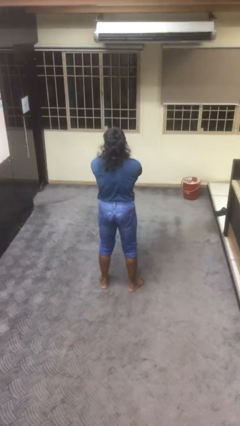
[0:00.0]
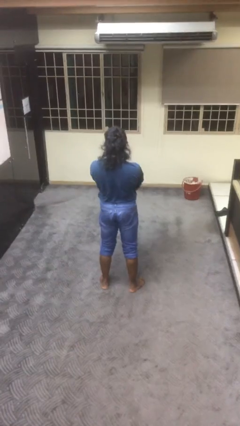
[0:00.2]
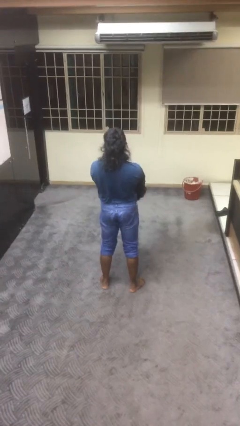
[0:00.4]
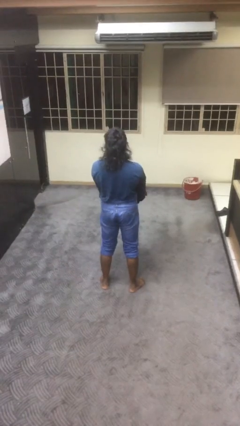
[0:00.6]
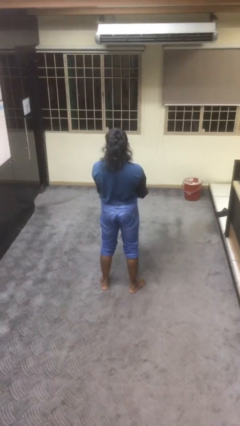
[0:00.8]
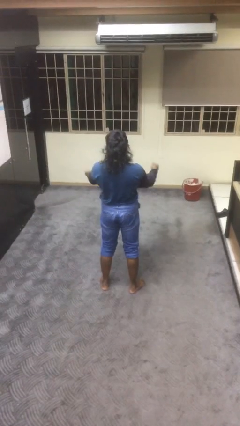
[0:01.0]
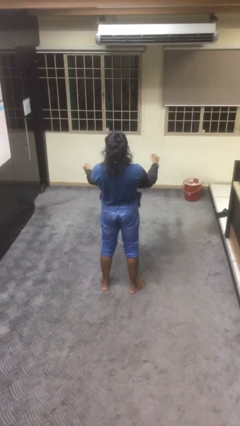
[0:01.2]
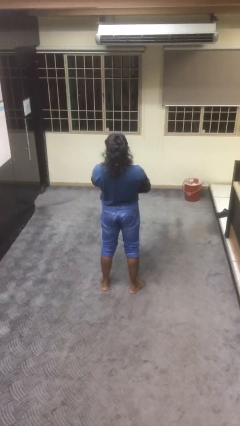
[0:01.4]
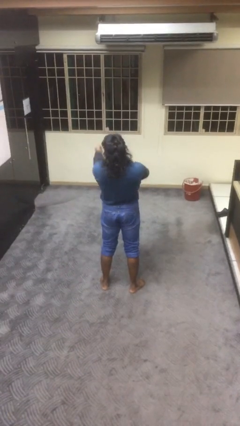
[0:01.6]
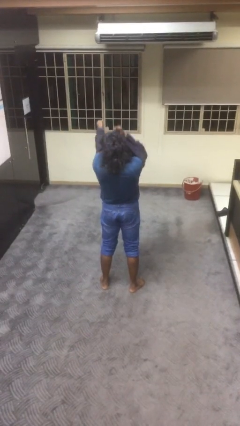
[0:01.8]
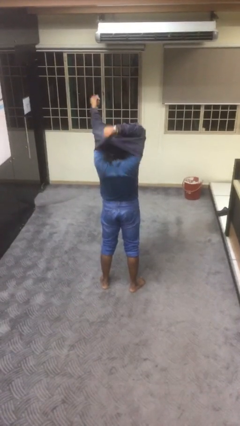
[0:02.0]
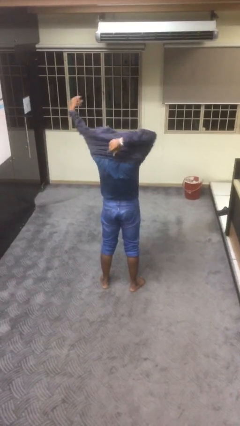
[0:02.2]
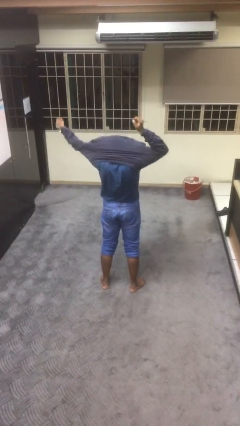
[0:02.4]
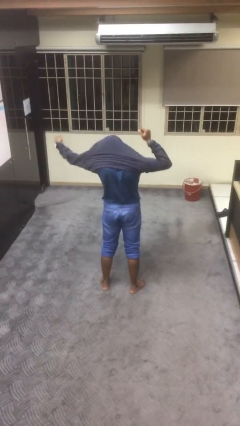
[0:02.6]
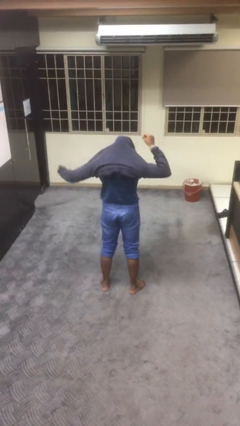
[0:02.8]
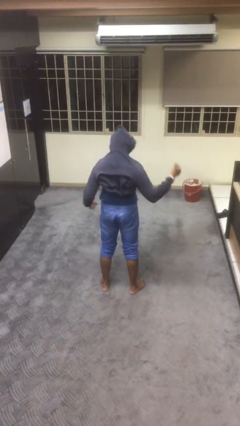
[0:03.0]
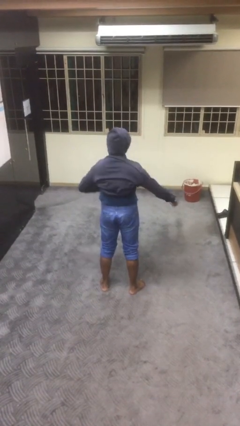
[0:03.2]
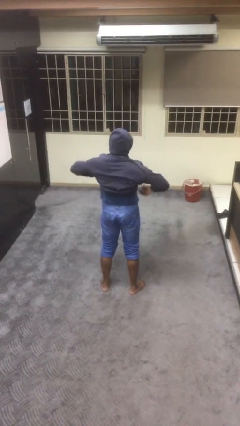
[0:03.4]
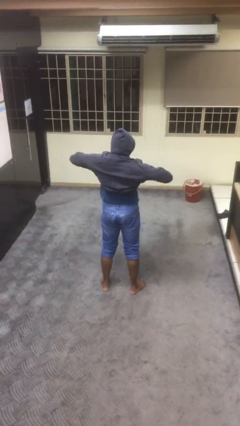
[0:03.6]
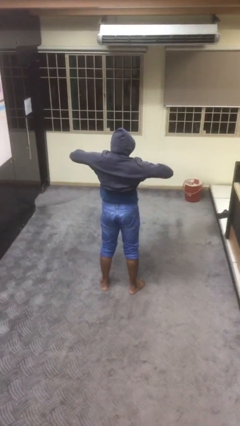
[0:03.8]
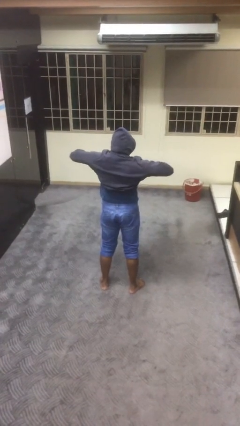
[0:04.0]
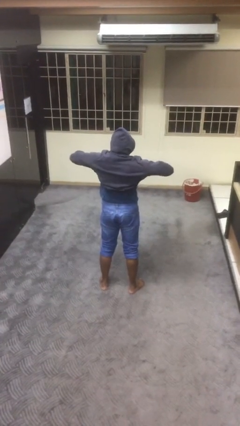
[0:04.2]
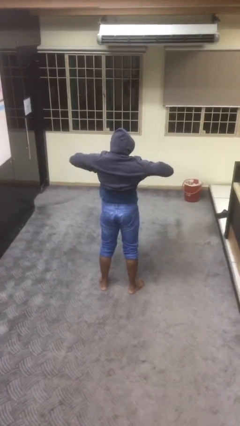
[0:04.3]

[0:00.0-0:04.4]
person puts on hoodie

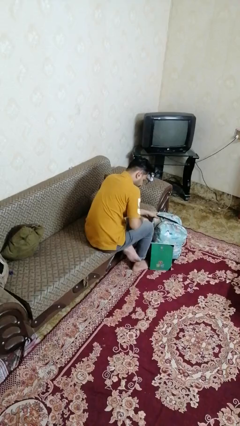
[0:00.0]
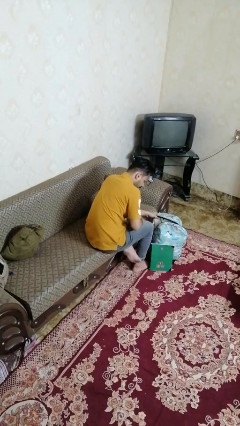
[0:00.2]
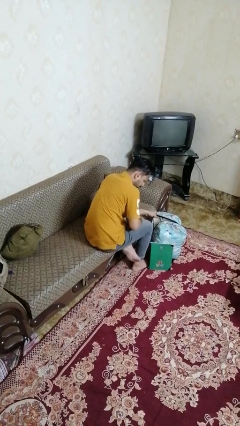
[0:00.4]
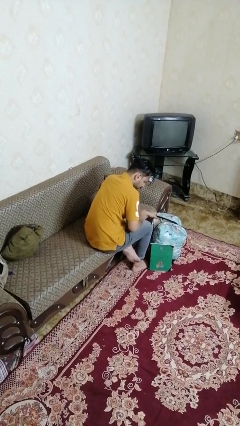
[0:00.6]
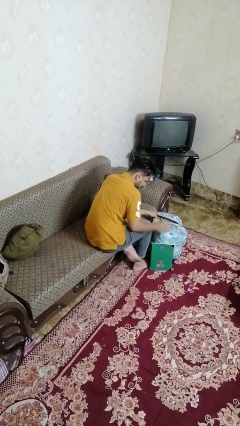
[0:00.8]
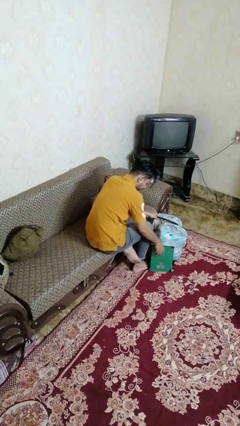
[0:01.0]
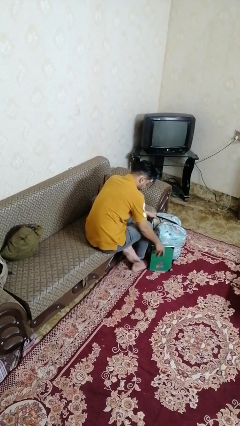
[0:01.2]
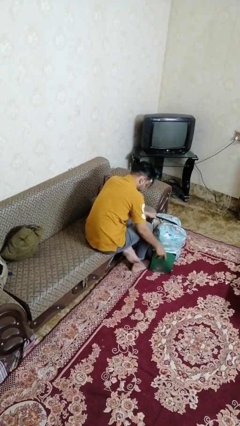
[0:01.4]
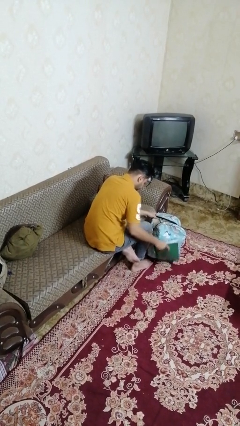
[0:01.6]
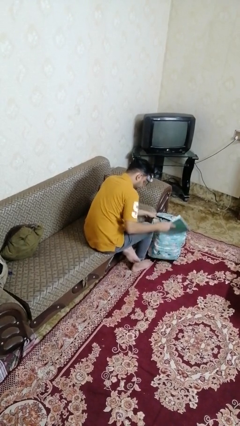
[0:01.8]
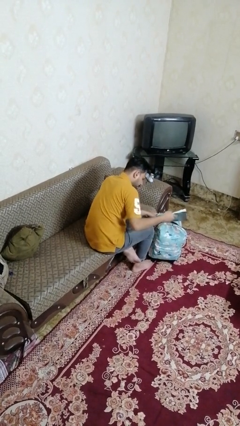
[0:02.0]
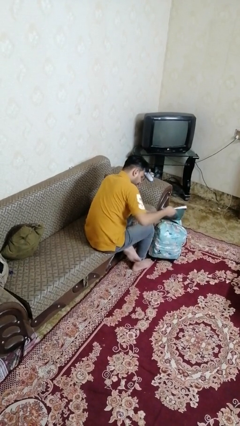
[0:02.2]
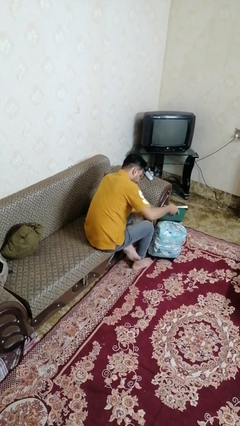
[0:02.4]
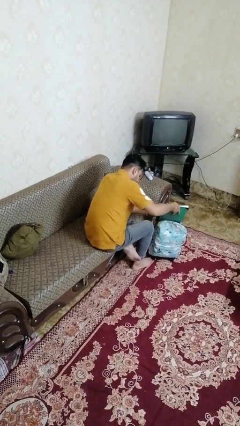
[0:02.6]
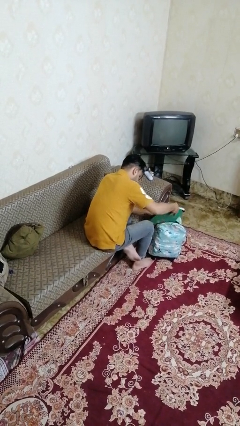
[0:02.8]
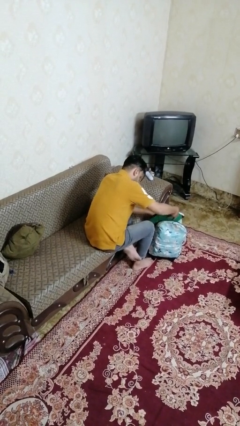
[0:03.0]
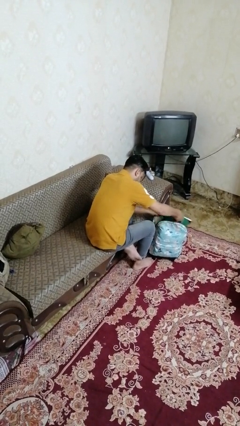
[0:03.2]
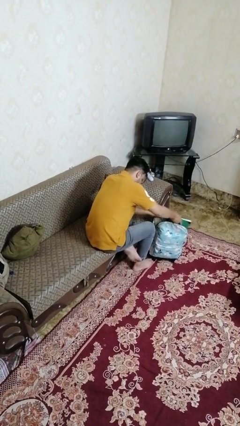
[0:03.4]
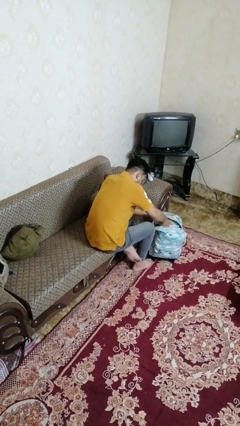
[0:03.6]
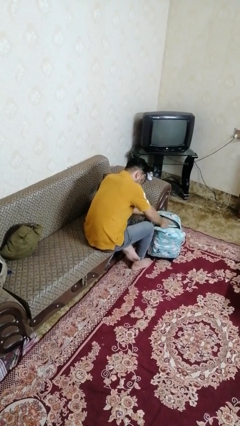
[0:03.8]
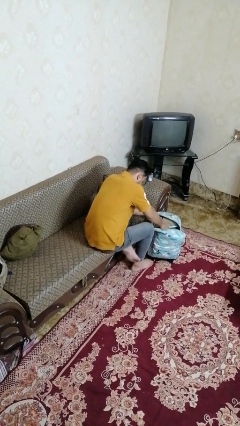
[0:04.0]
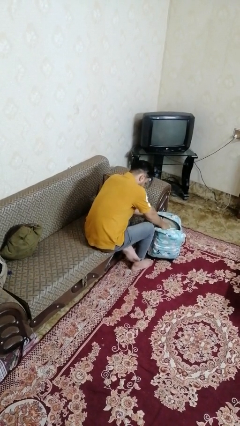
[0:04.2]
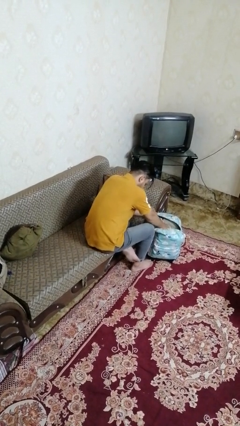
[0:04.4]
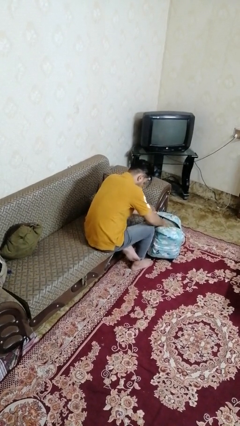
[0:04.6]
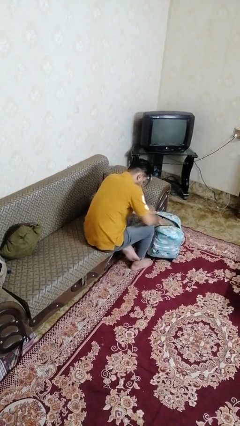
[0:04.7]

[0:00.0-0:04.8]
person puts object into bag

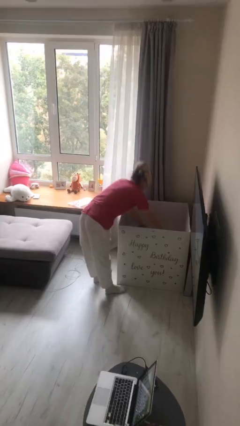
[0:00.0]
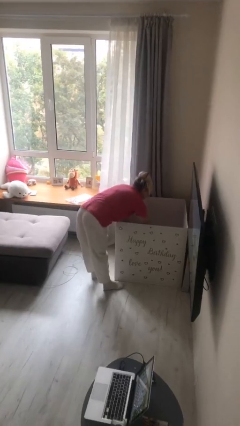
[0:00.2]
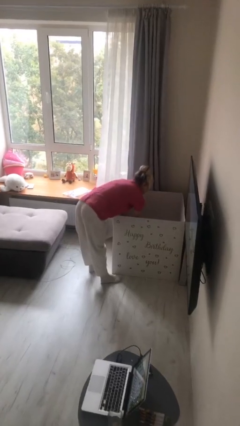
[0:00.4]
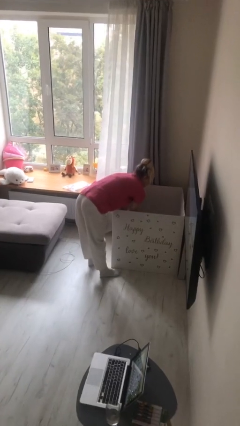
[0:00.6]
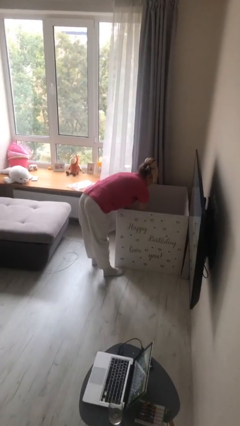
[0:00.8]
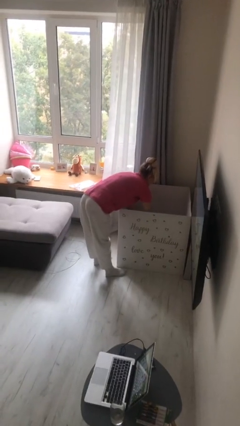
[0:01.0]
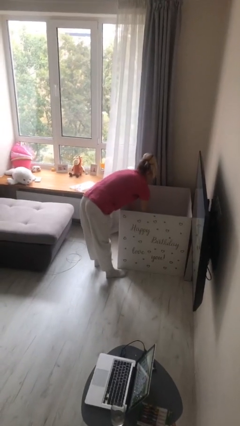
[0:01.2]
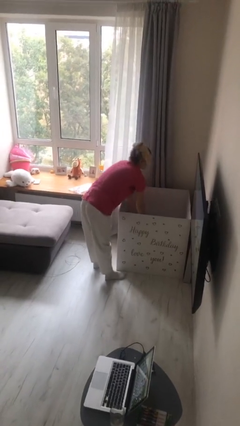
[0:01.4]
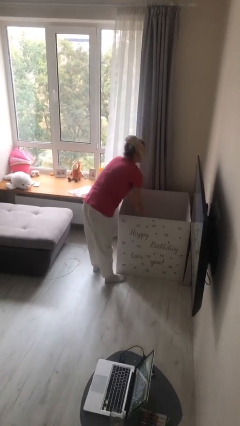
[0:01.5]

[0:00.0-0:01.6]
person searches in box

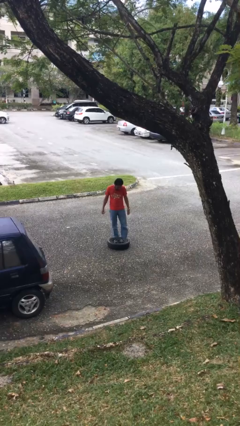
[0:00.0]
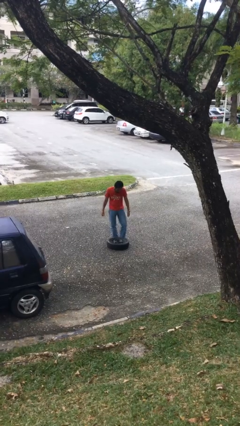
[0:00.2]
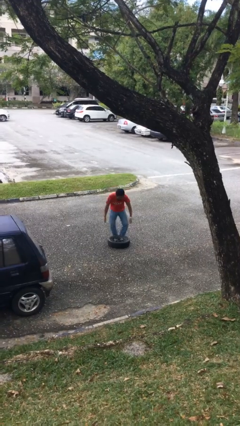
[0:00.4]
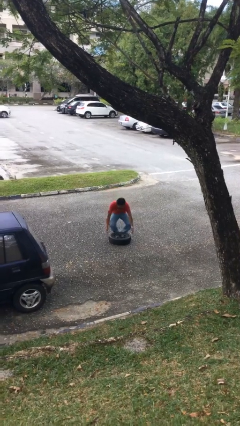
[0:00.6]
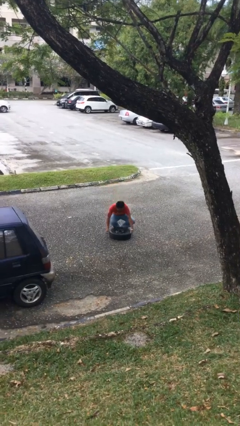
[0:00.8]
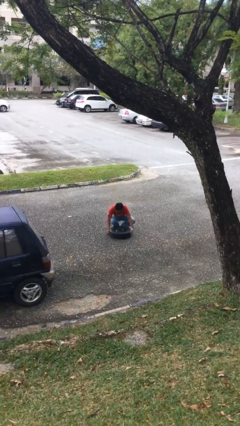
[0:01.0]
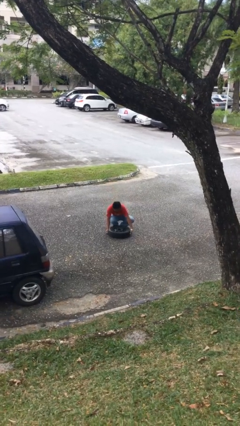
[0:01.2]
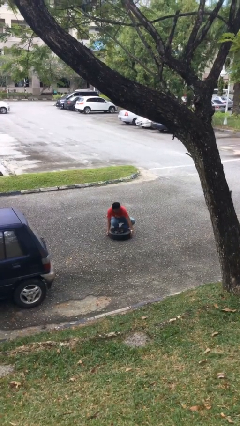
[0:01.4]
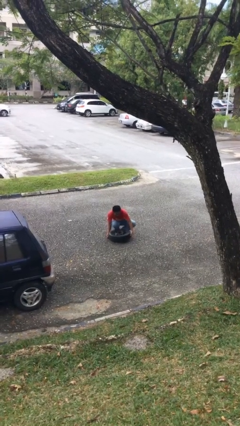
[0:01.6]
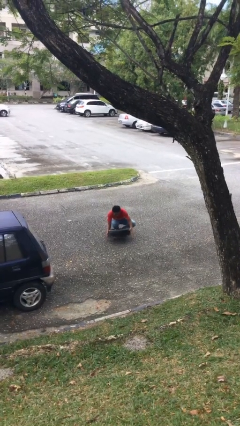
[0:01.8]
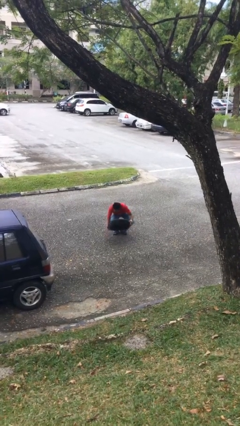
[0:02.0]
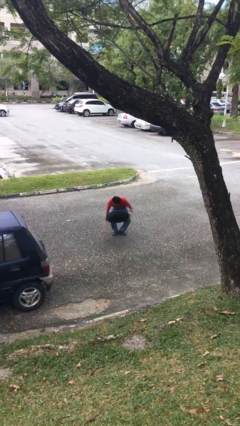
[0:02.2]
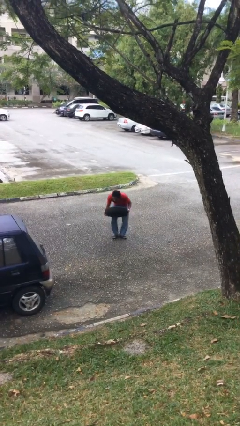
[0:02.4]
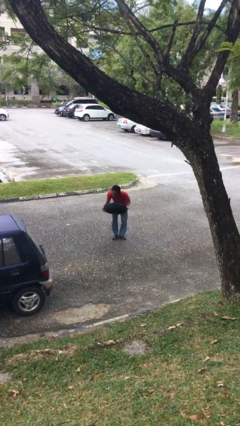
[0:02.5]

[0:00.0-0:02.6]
person picks up object from floor

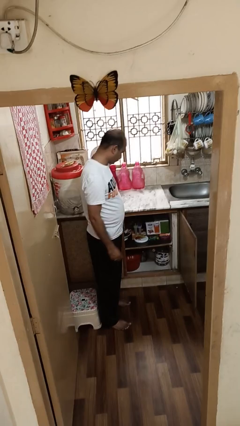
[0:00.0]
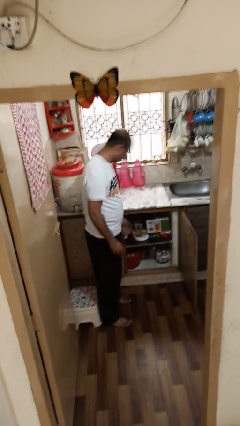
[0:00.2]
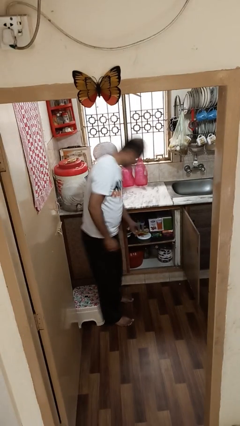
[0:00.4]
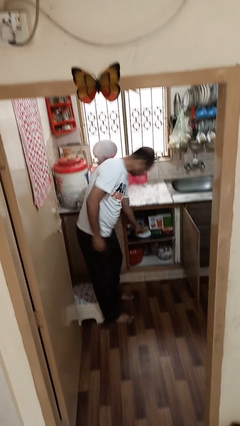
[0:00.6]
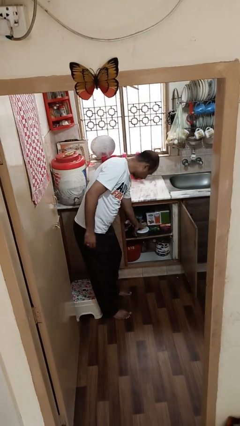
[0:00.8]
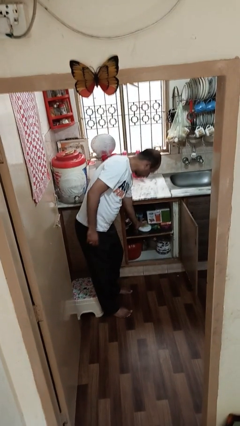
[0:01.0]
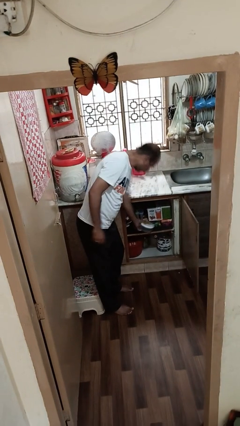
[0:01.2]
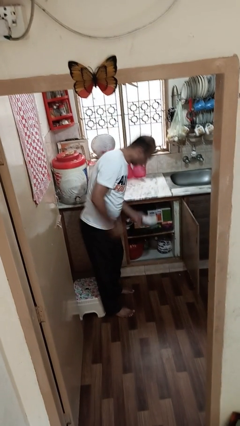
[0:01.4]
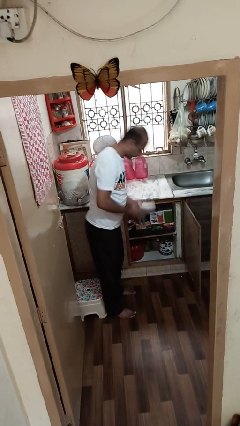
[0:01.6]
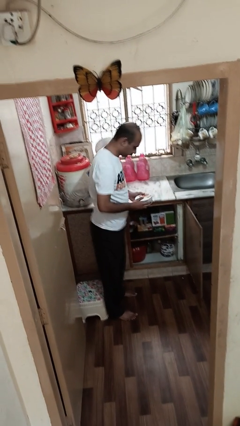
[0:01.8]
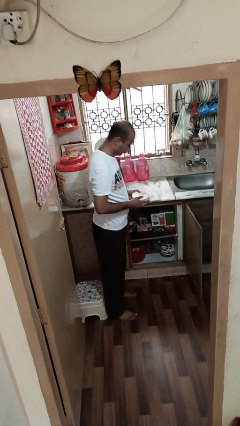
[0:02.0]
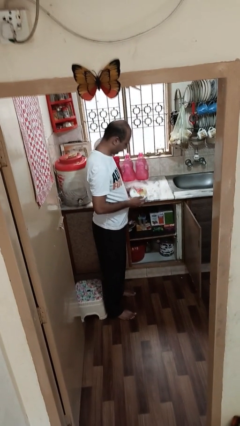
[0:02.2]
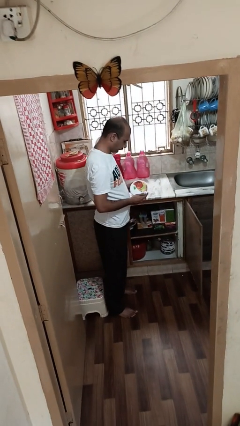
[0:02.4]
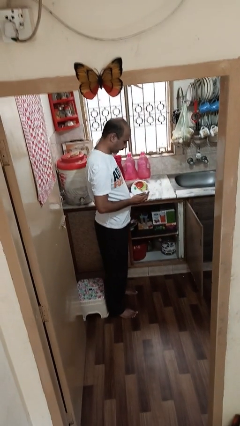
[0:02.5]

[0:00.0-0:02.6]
person picks up object from cabinet

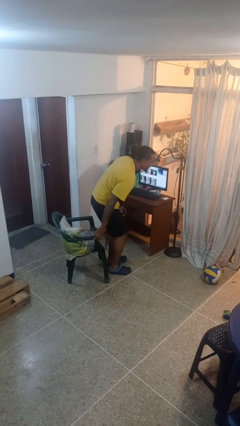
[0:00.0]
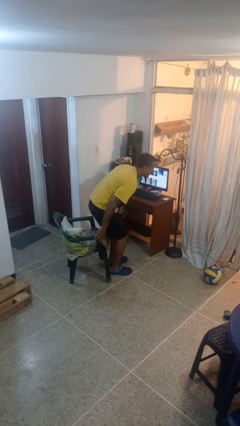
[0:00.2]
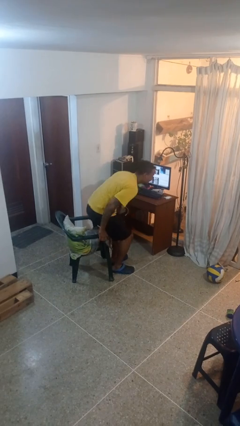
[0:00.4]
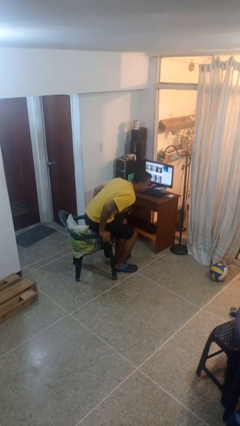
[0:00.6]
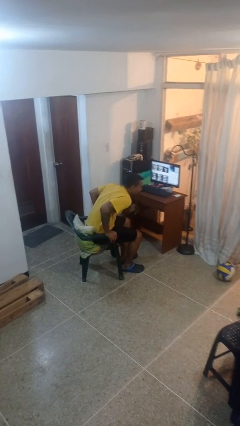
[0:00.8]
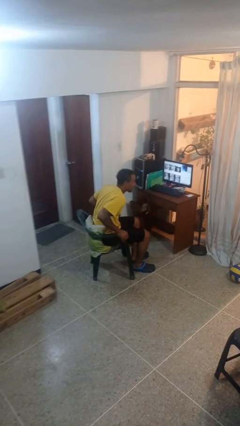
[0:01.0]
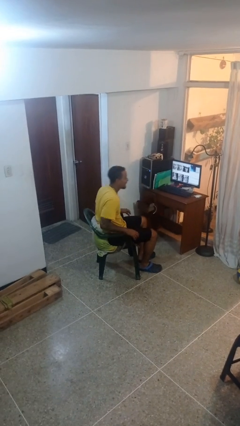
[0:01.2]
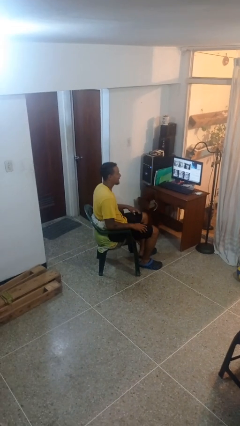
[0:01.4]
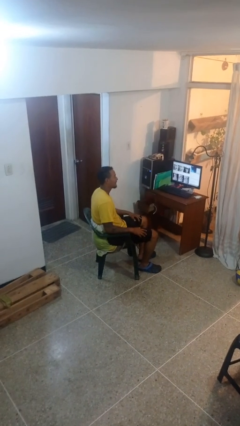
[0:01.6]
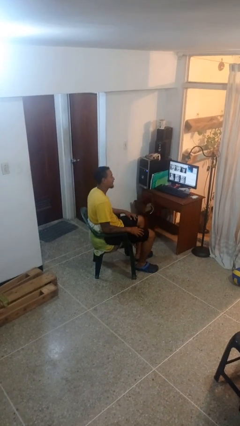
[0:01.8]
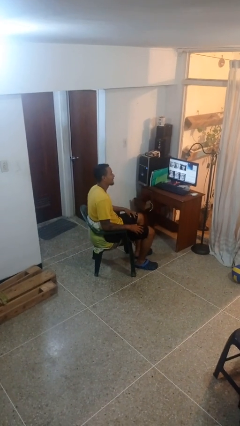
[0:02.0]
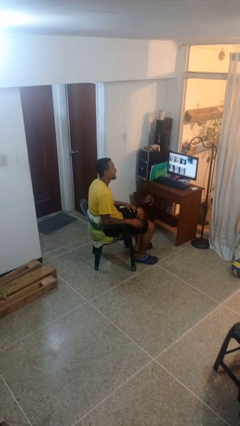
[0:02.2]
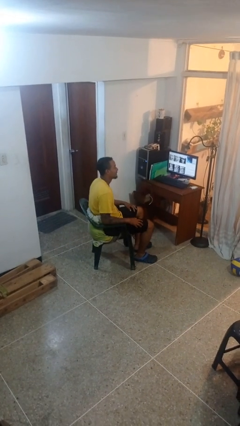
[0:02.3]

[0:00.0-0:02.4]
person sits down
